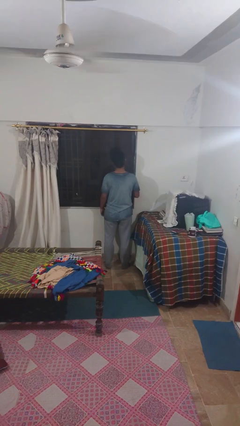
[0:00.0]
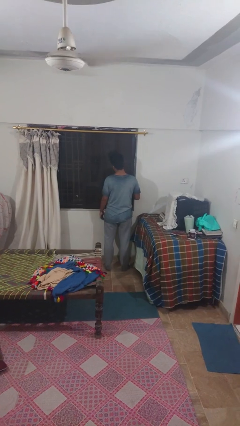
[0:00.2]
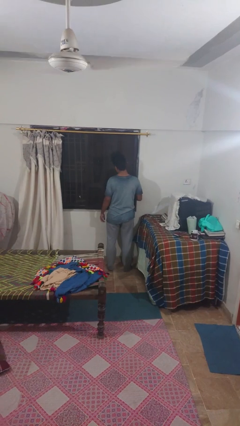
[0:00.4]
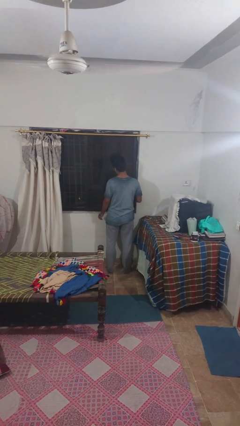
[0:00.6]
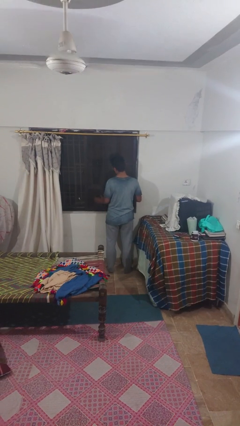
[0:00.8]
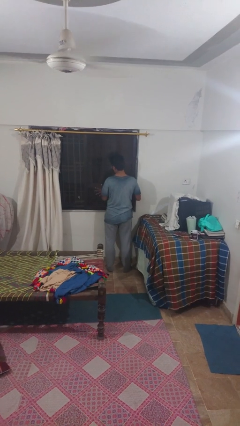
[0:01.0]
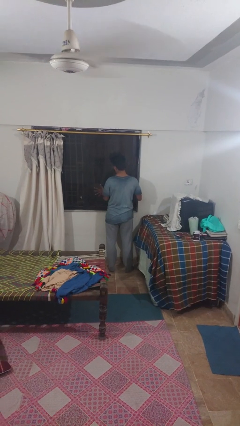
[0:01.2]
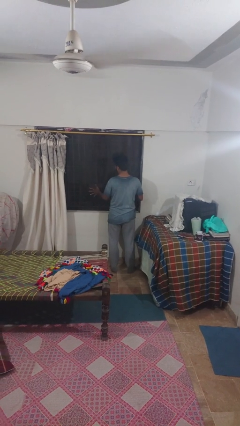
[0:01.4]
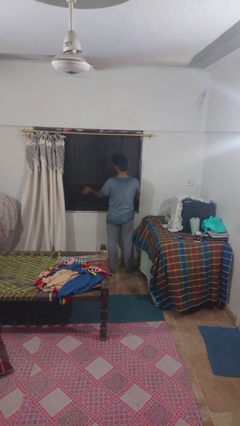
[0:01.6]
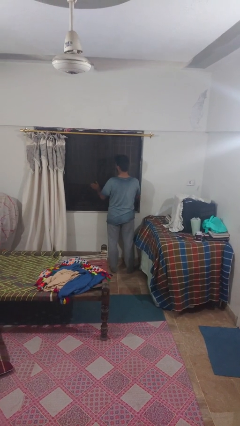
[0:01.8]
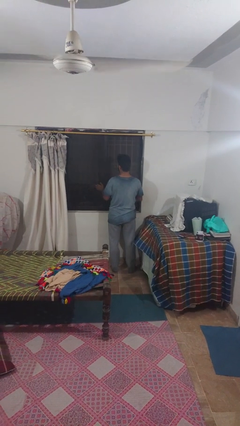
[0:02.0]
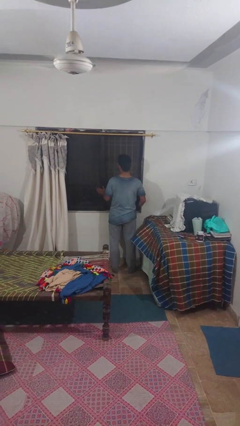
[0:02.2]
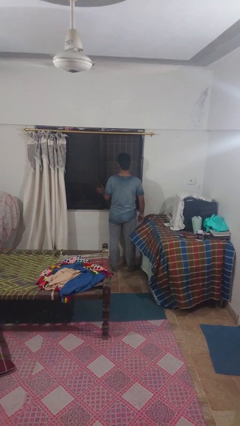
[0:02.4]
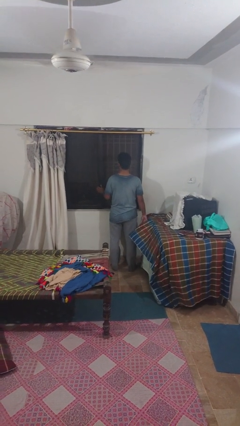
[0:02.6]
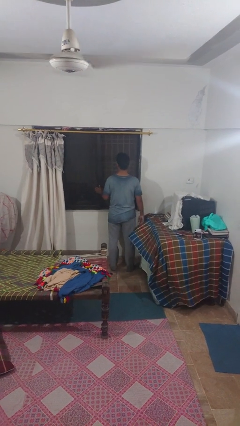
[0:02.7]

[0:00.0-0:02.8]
person opens sliding door

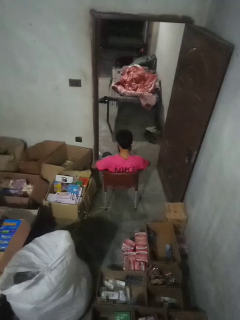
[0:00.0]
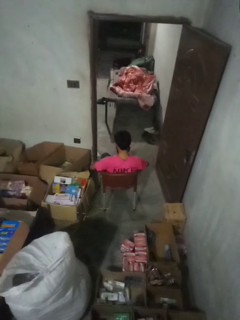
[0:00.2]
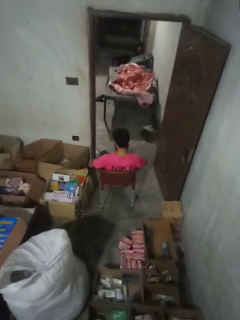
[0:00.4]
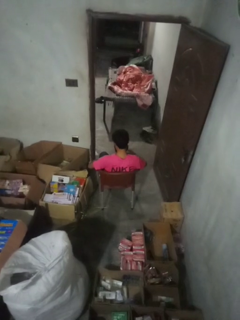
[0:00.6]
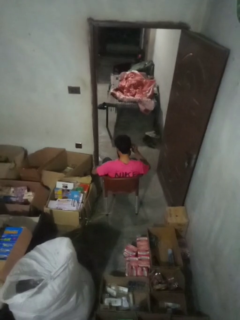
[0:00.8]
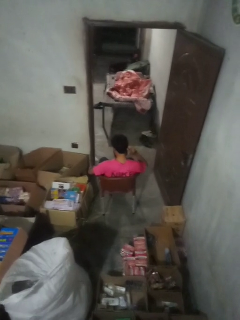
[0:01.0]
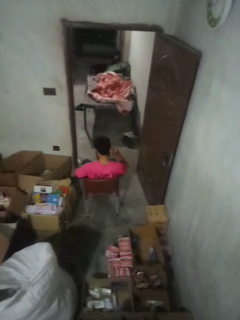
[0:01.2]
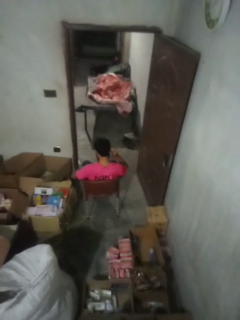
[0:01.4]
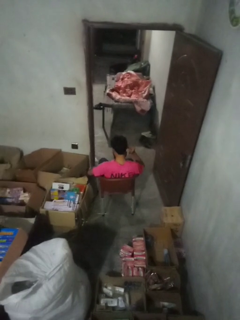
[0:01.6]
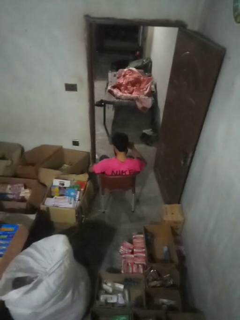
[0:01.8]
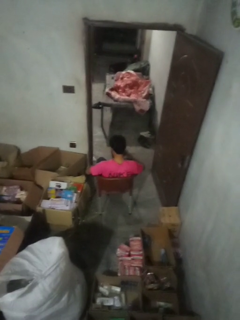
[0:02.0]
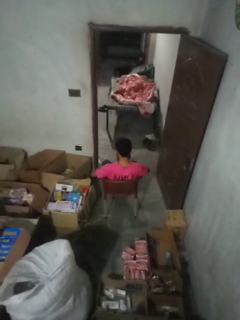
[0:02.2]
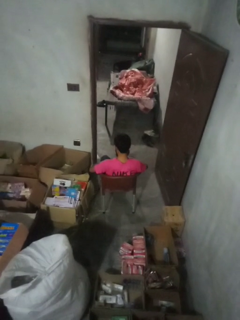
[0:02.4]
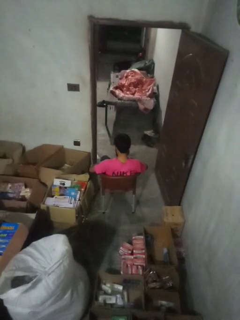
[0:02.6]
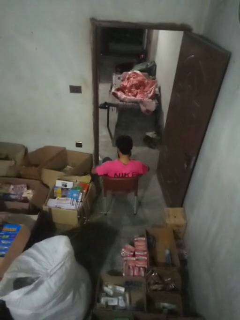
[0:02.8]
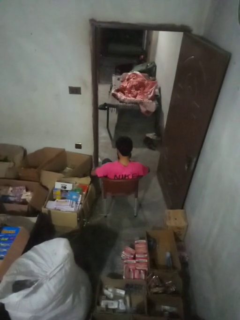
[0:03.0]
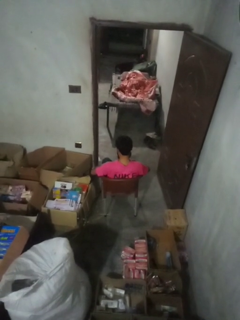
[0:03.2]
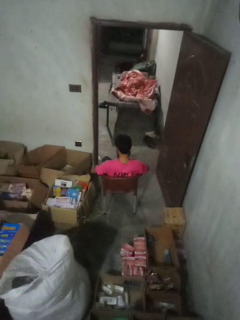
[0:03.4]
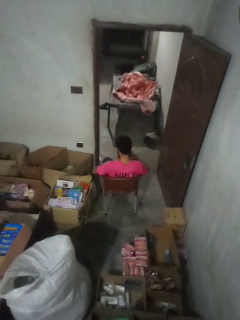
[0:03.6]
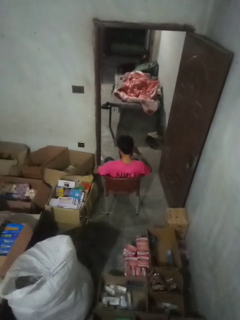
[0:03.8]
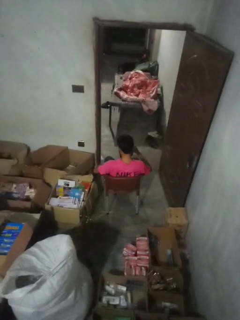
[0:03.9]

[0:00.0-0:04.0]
person touches earlobe

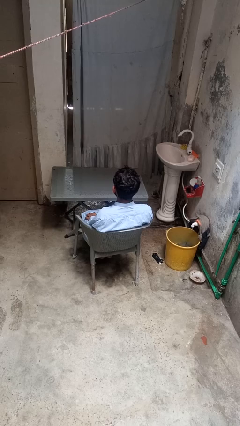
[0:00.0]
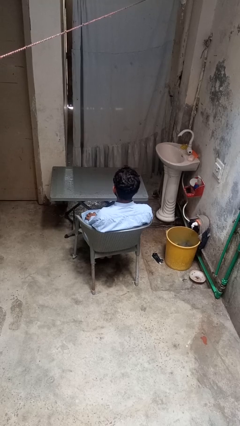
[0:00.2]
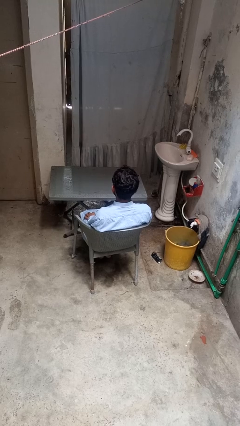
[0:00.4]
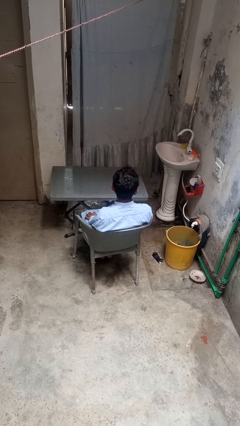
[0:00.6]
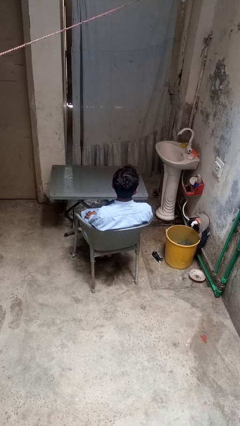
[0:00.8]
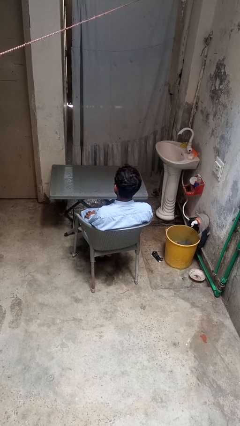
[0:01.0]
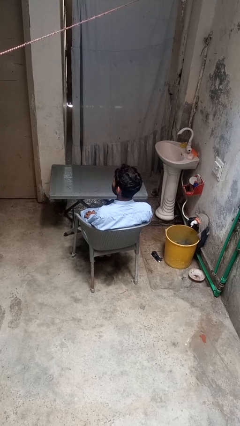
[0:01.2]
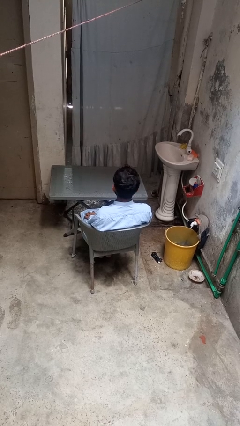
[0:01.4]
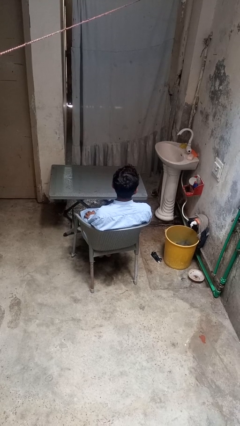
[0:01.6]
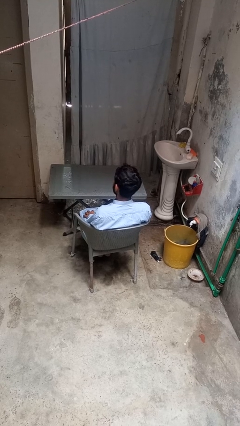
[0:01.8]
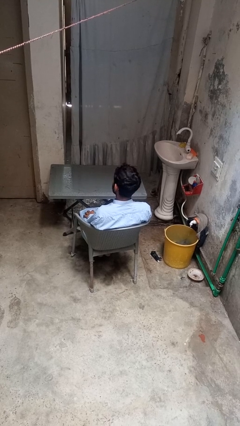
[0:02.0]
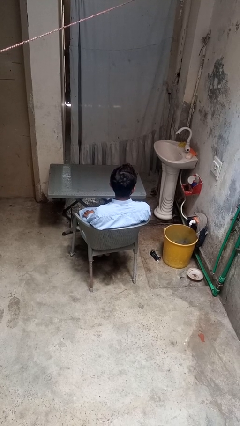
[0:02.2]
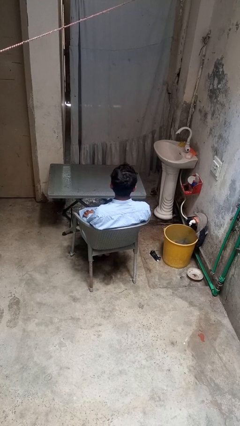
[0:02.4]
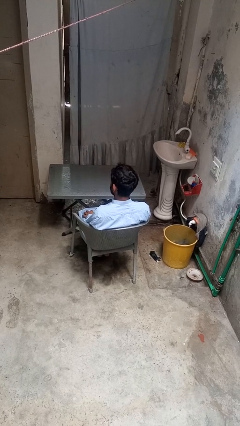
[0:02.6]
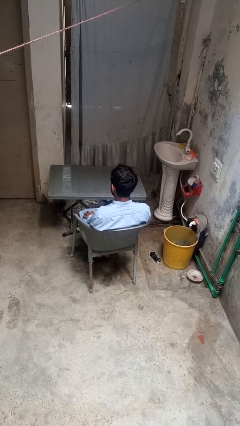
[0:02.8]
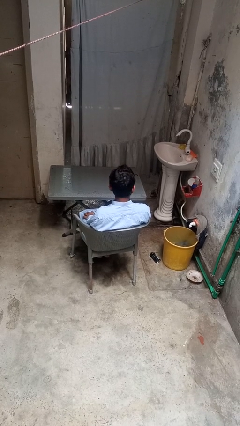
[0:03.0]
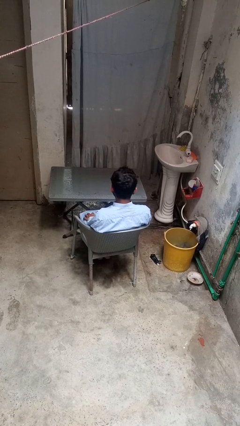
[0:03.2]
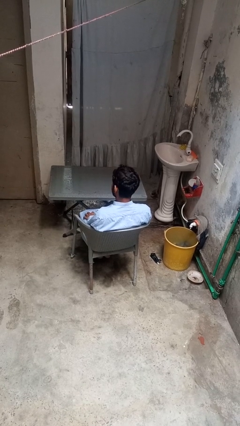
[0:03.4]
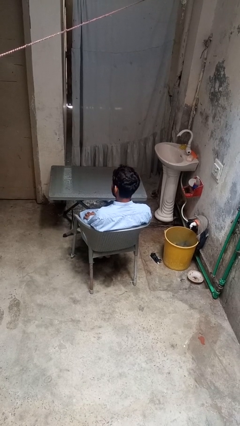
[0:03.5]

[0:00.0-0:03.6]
person shakes head

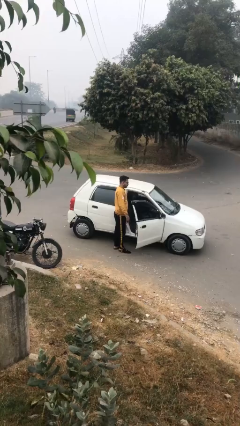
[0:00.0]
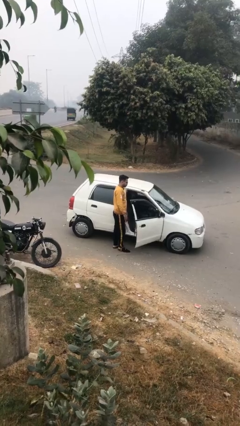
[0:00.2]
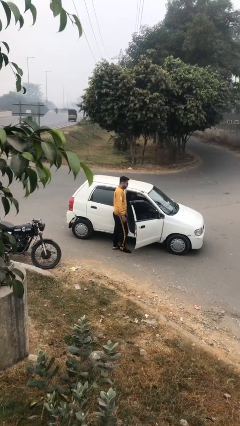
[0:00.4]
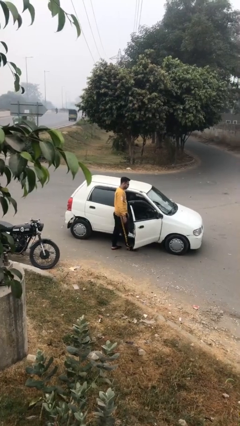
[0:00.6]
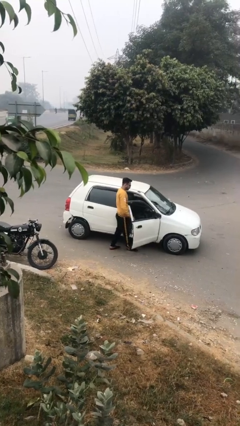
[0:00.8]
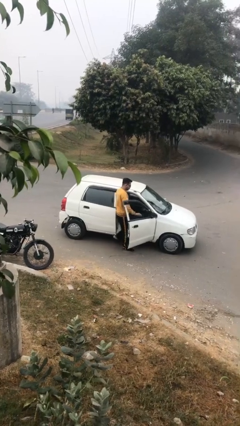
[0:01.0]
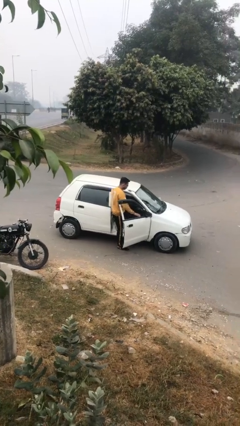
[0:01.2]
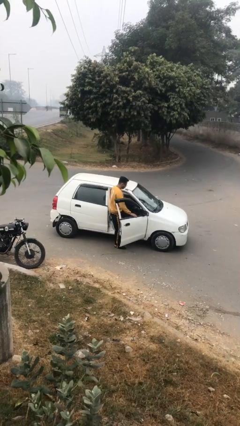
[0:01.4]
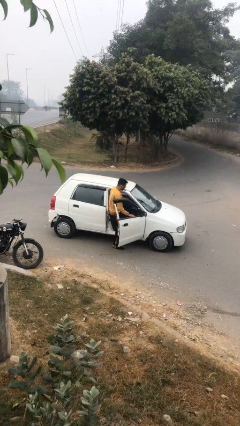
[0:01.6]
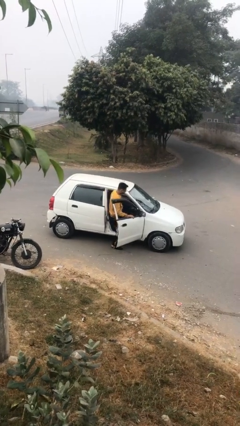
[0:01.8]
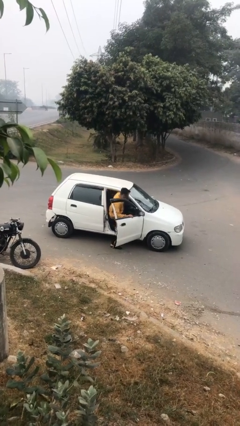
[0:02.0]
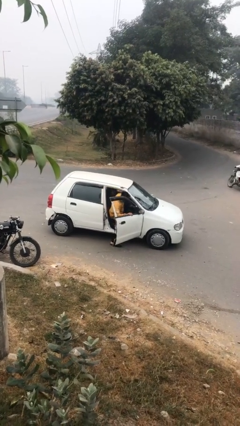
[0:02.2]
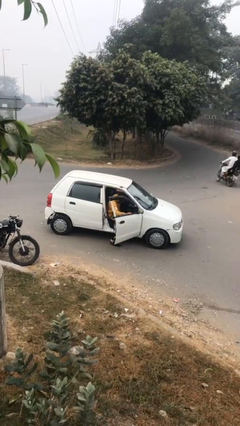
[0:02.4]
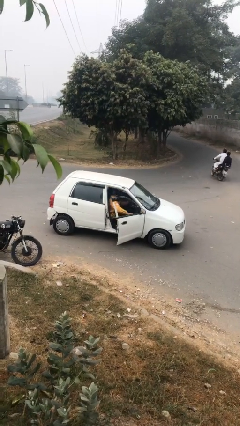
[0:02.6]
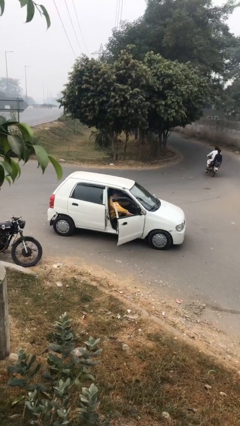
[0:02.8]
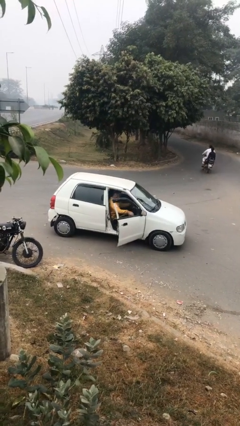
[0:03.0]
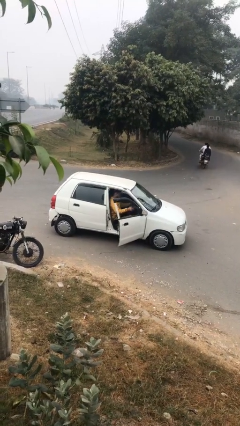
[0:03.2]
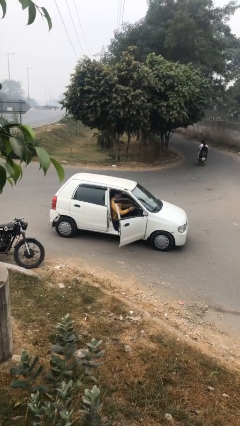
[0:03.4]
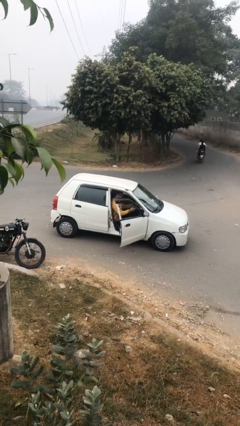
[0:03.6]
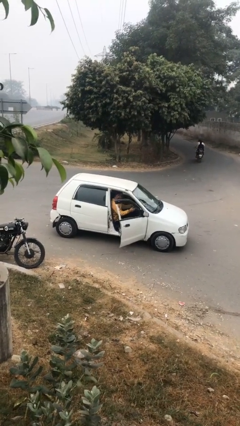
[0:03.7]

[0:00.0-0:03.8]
person enters car

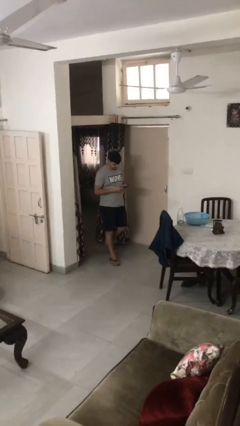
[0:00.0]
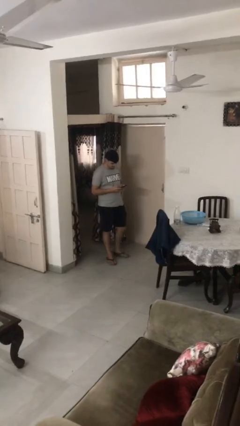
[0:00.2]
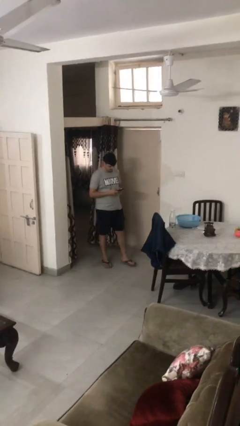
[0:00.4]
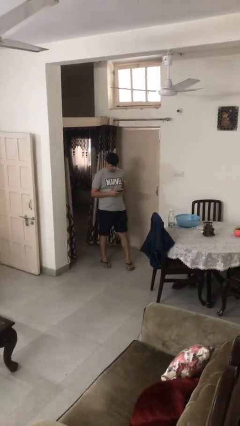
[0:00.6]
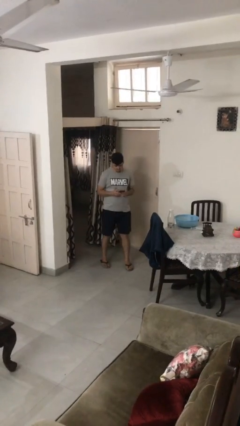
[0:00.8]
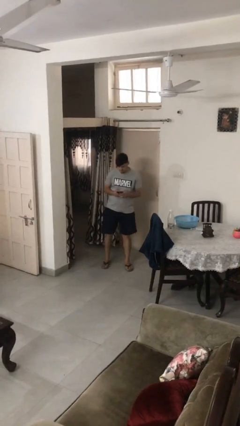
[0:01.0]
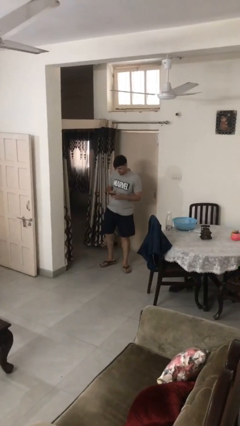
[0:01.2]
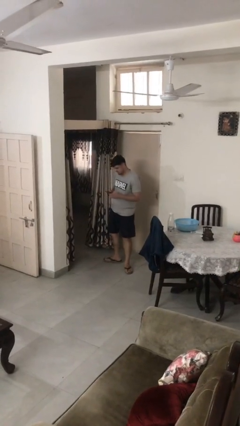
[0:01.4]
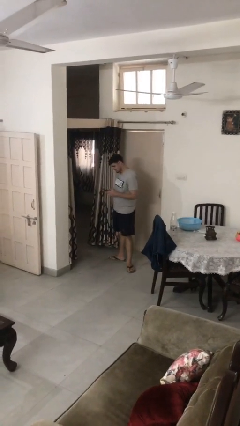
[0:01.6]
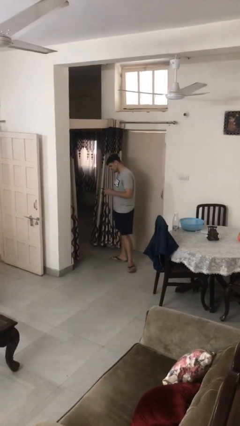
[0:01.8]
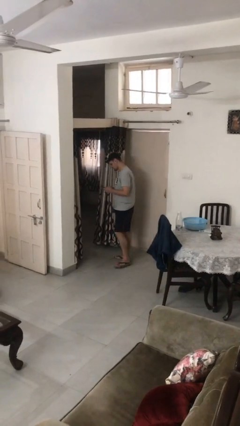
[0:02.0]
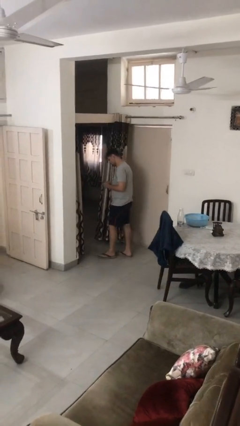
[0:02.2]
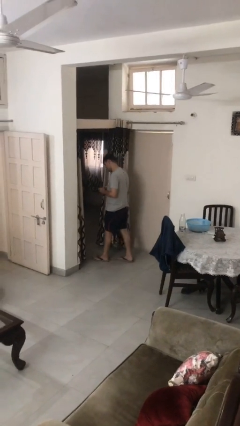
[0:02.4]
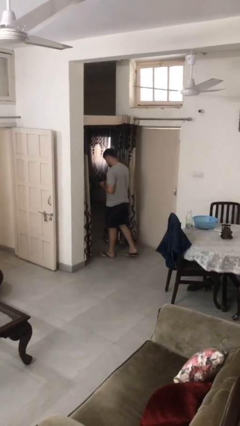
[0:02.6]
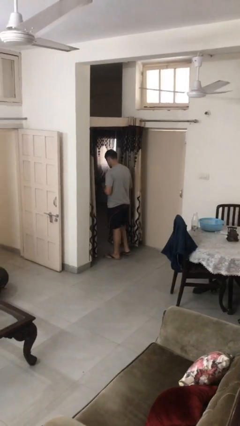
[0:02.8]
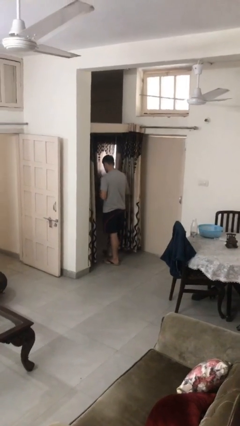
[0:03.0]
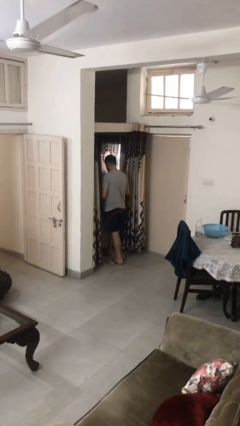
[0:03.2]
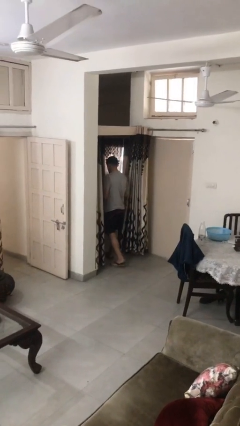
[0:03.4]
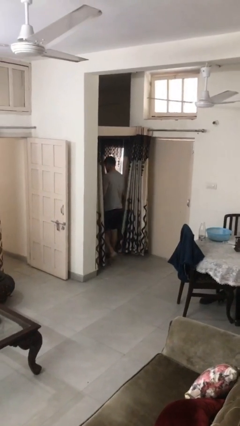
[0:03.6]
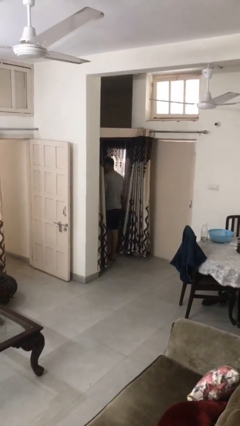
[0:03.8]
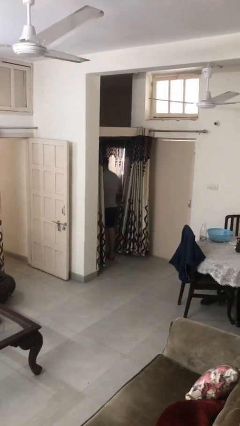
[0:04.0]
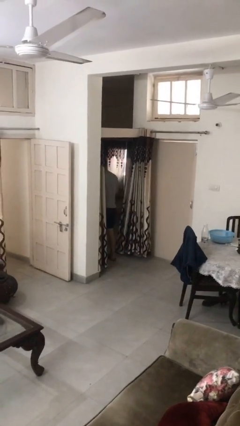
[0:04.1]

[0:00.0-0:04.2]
person exits scene through structure
